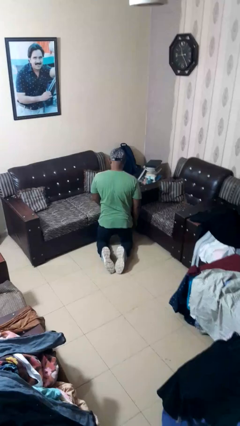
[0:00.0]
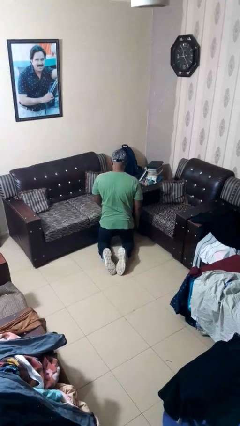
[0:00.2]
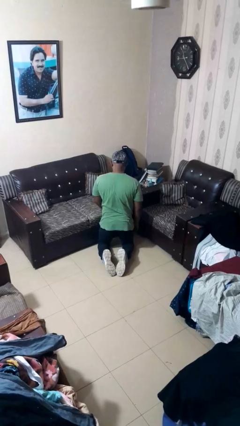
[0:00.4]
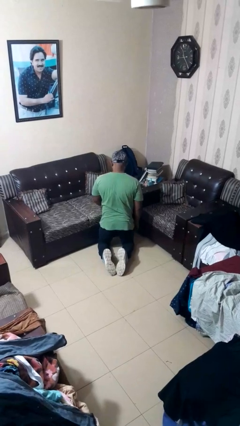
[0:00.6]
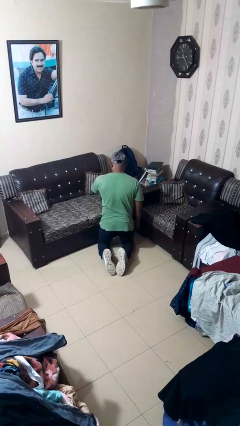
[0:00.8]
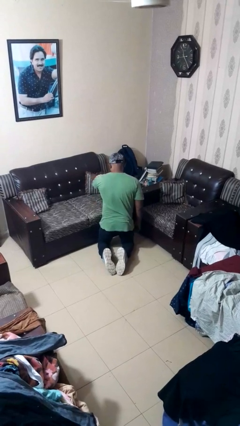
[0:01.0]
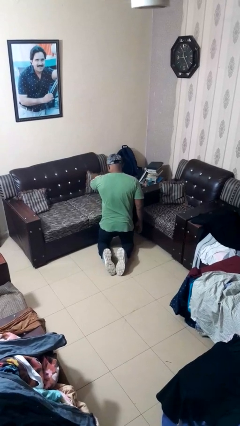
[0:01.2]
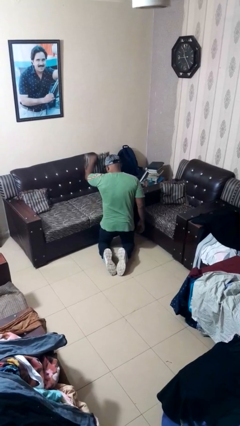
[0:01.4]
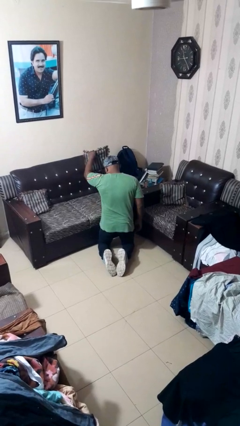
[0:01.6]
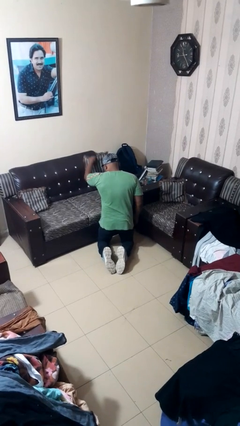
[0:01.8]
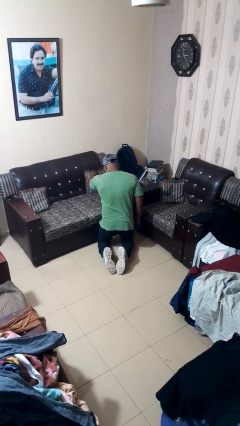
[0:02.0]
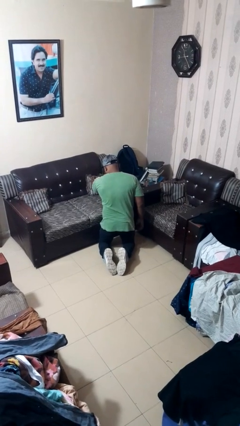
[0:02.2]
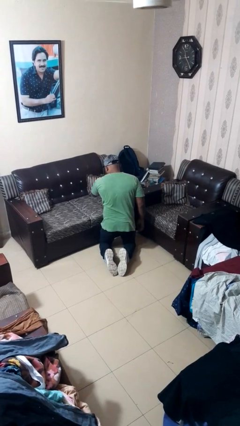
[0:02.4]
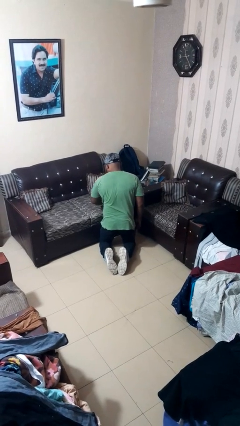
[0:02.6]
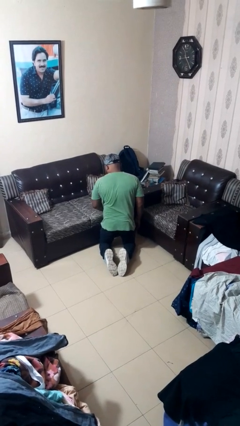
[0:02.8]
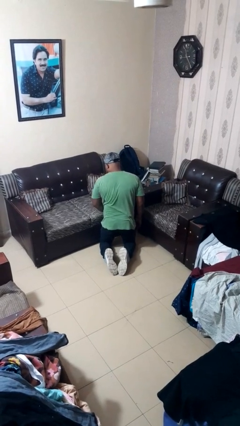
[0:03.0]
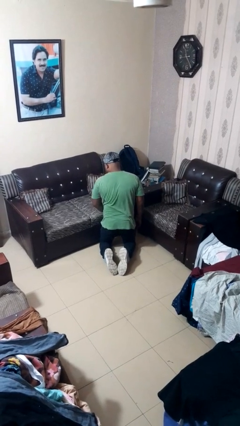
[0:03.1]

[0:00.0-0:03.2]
person searches in couch

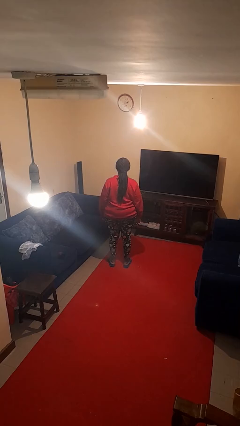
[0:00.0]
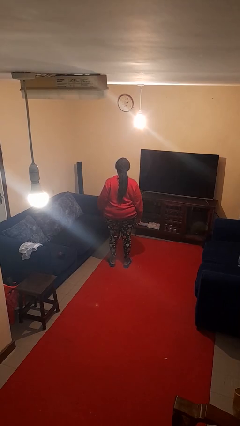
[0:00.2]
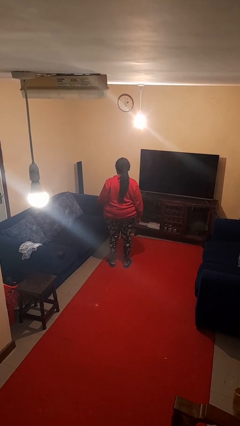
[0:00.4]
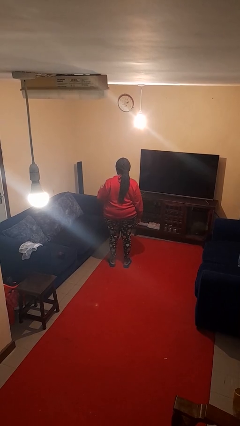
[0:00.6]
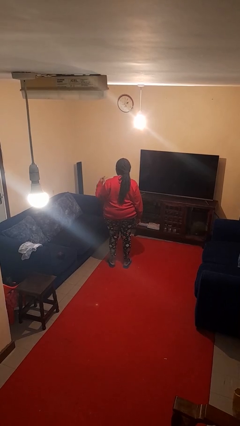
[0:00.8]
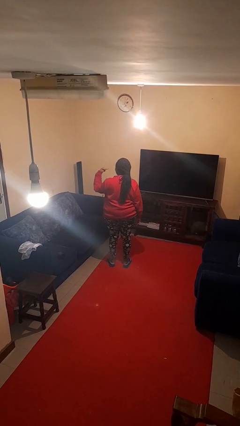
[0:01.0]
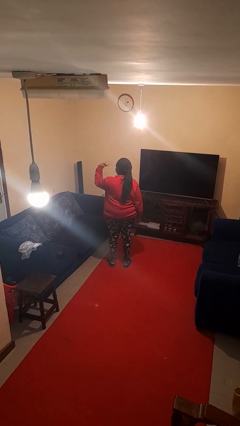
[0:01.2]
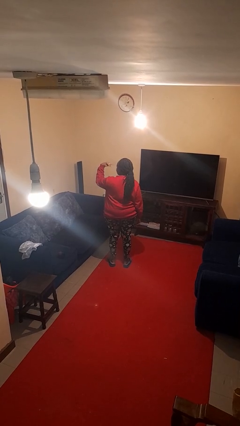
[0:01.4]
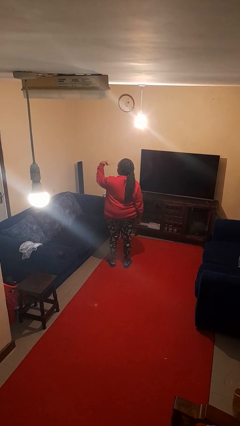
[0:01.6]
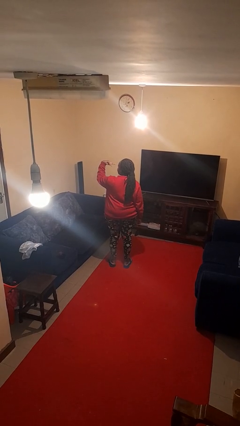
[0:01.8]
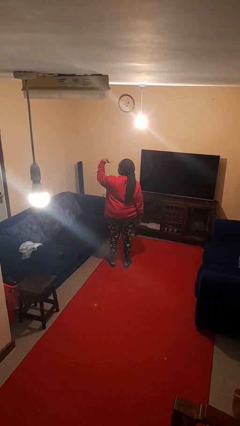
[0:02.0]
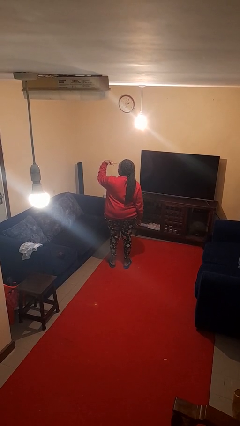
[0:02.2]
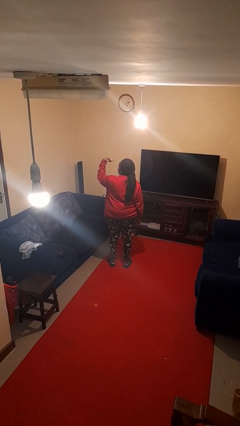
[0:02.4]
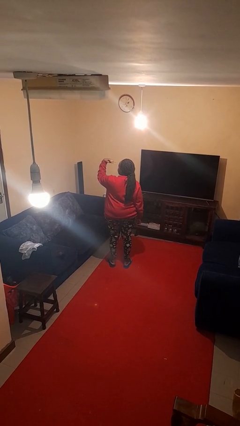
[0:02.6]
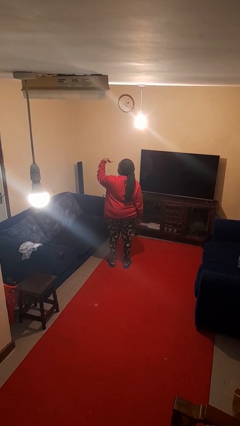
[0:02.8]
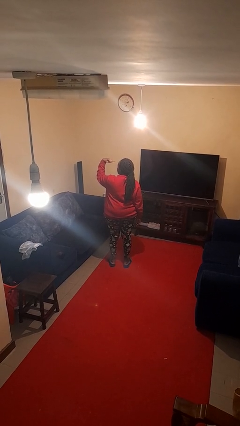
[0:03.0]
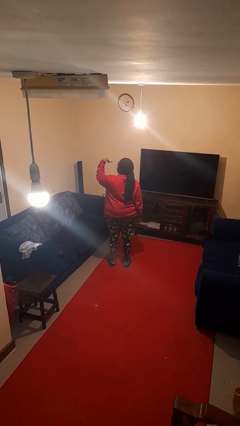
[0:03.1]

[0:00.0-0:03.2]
person gestures watch closely

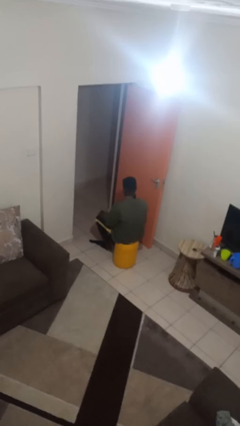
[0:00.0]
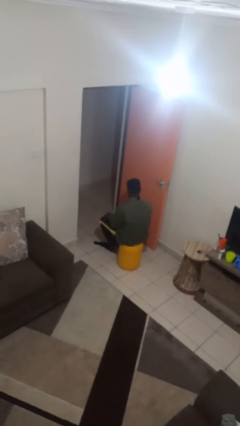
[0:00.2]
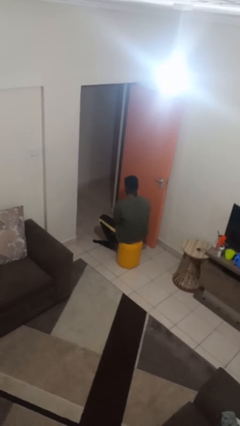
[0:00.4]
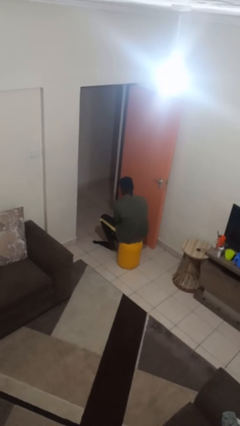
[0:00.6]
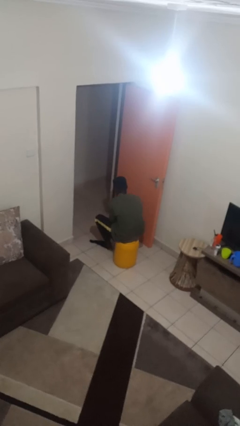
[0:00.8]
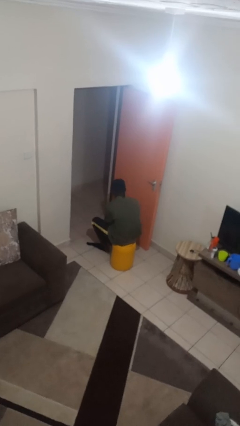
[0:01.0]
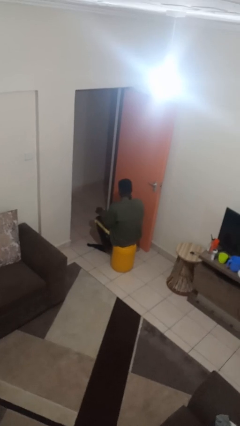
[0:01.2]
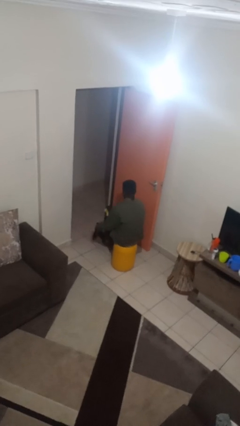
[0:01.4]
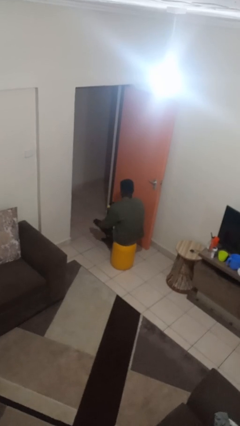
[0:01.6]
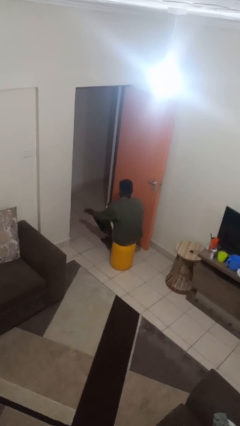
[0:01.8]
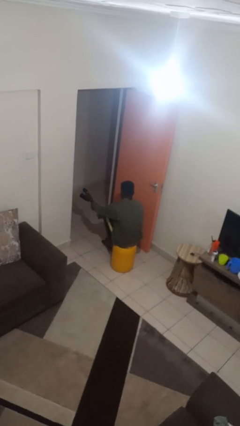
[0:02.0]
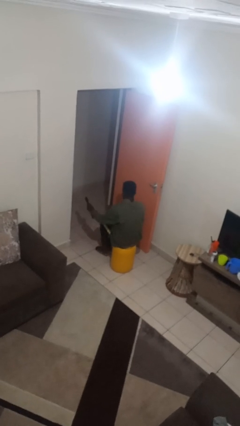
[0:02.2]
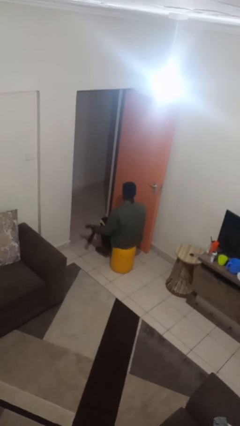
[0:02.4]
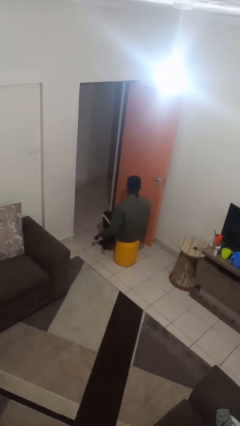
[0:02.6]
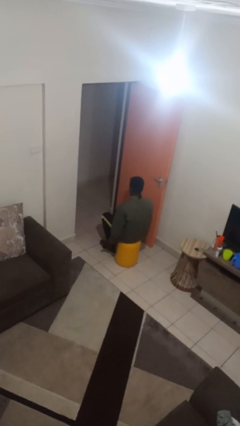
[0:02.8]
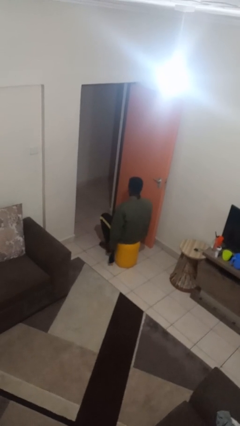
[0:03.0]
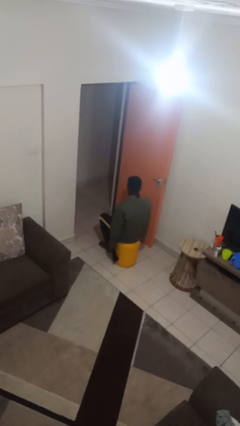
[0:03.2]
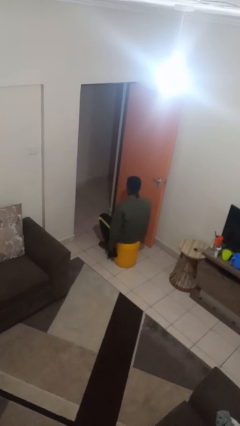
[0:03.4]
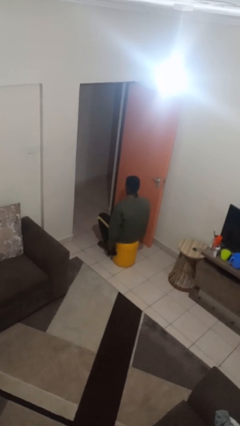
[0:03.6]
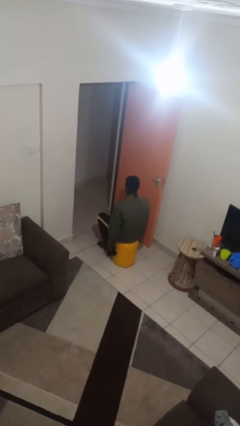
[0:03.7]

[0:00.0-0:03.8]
person takes off socks

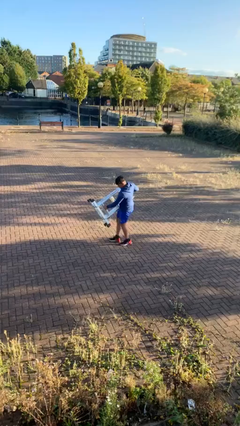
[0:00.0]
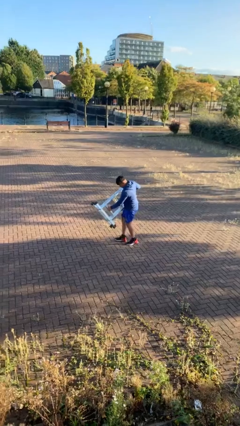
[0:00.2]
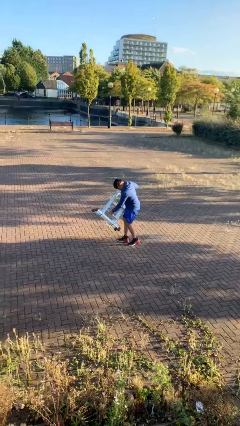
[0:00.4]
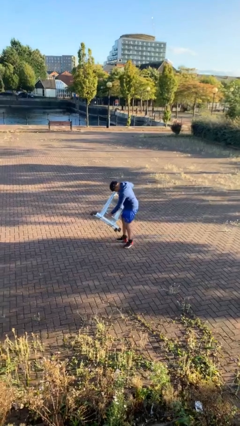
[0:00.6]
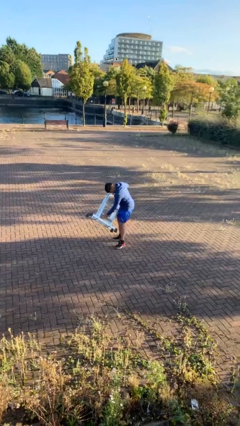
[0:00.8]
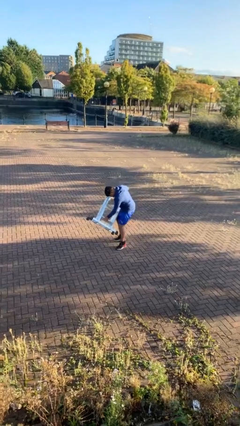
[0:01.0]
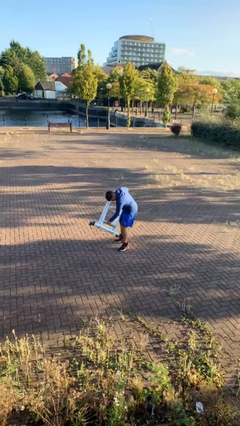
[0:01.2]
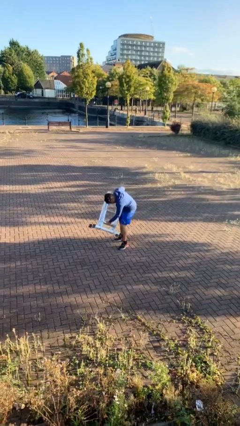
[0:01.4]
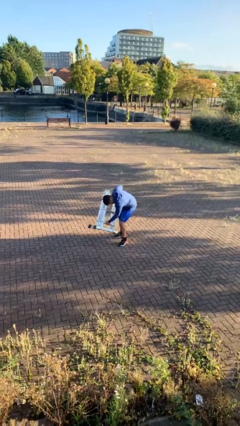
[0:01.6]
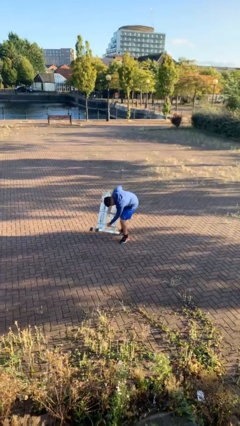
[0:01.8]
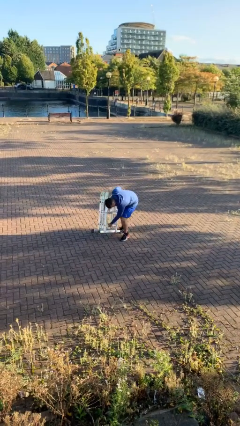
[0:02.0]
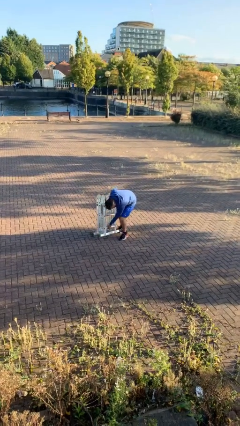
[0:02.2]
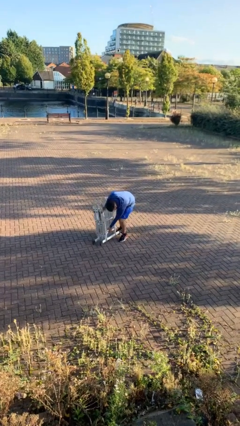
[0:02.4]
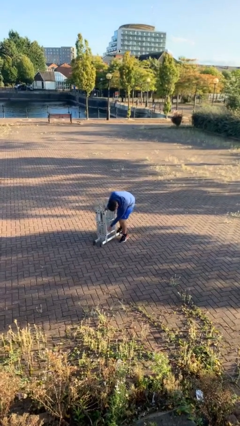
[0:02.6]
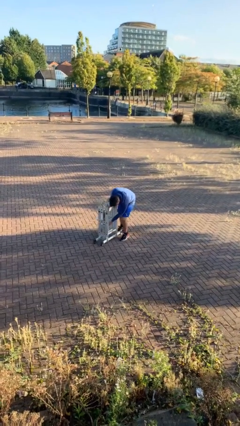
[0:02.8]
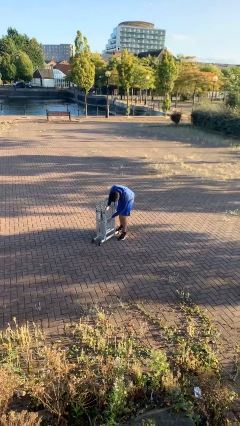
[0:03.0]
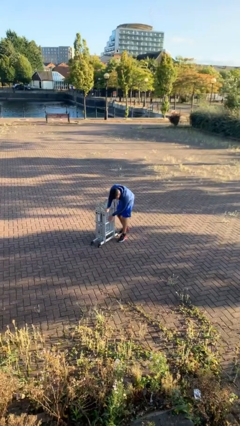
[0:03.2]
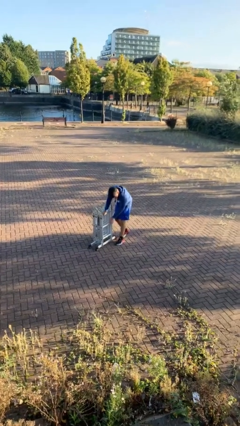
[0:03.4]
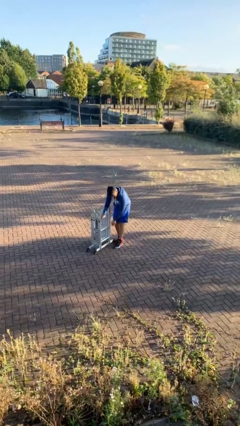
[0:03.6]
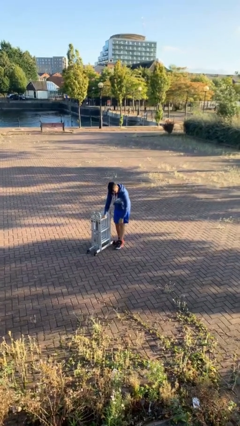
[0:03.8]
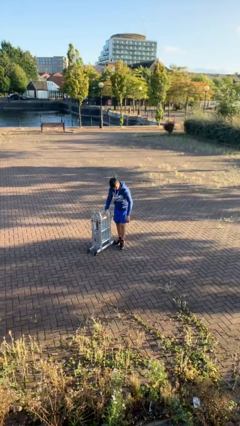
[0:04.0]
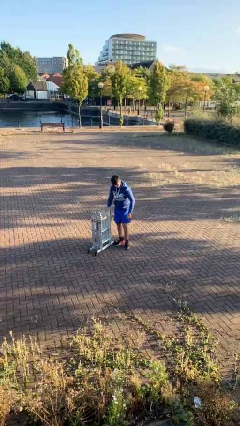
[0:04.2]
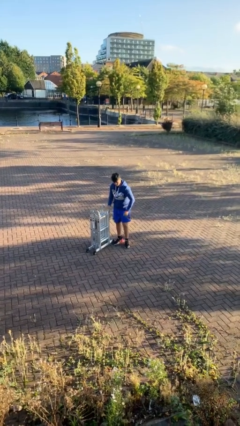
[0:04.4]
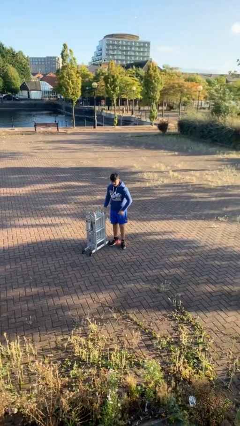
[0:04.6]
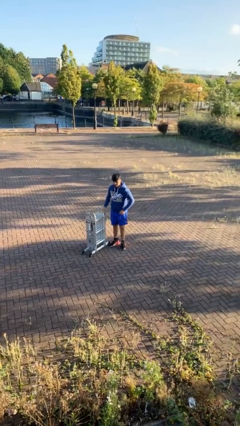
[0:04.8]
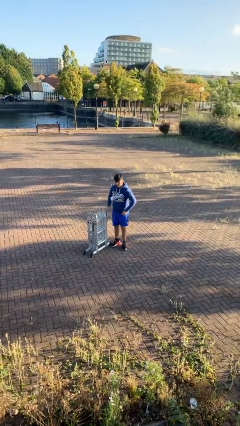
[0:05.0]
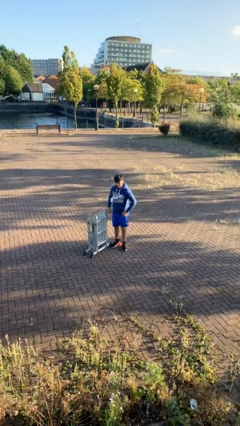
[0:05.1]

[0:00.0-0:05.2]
person puts down object on floor

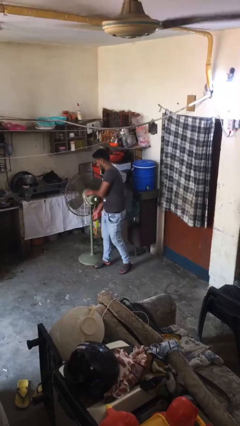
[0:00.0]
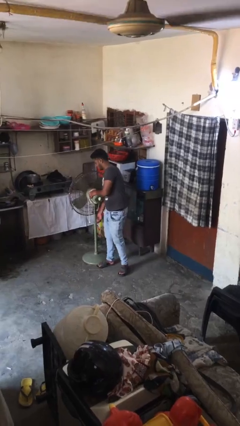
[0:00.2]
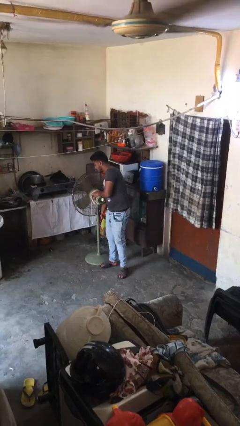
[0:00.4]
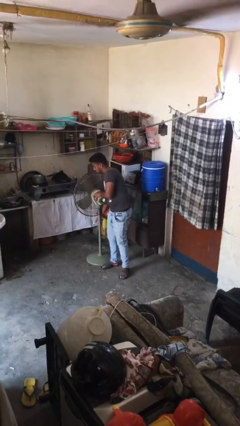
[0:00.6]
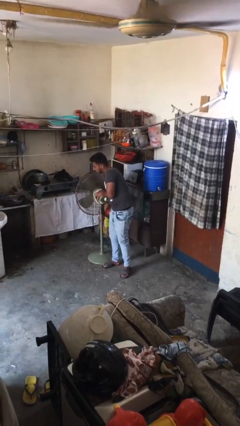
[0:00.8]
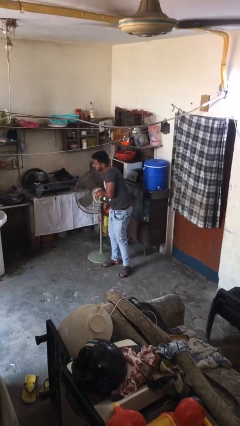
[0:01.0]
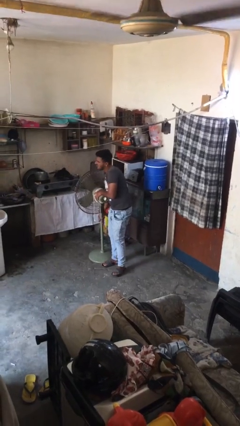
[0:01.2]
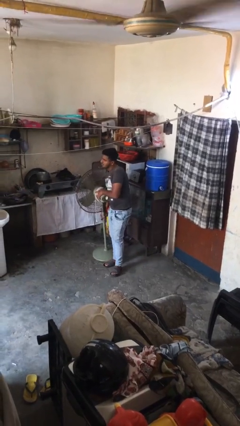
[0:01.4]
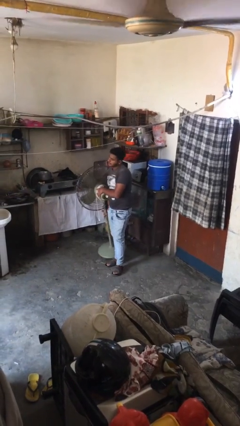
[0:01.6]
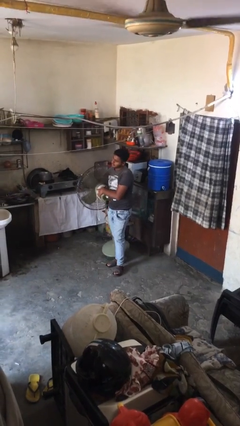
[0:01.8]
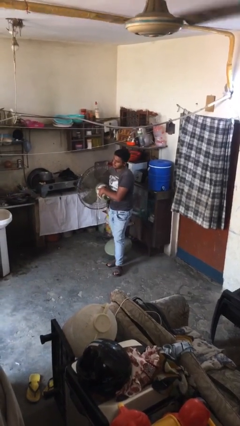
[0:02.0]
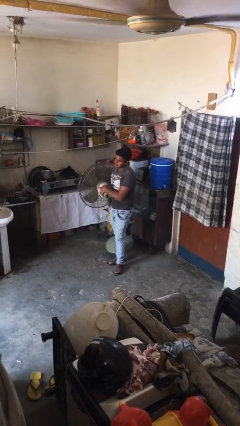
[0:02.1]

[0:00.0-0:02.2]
person picks up object from floor
